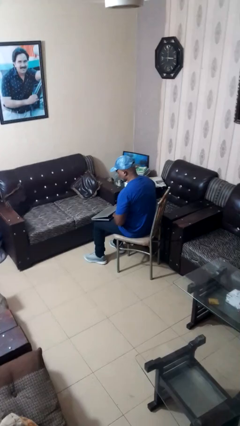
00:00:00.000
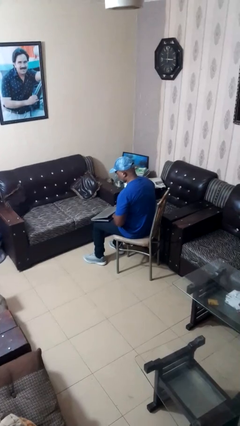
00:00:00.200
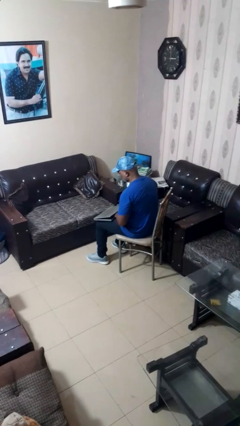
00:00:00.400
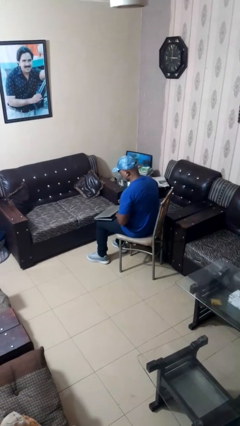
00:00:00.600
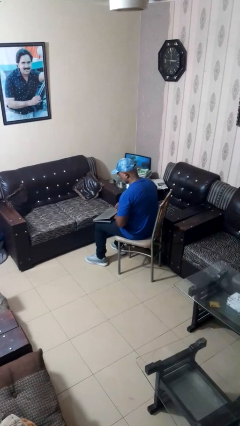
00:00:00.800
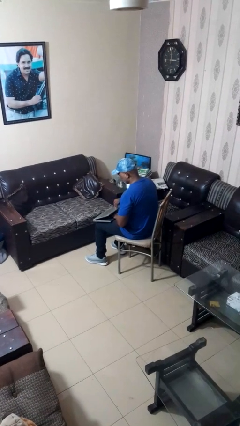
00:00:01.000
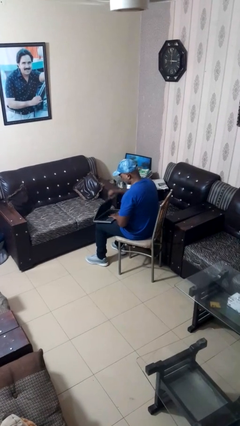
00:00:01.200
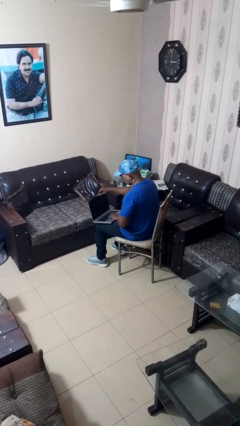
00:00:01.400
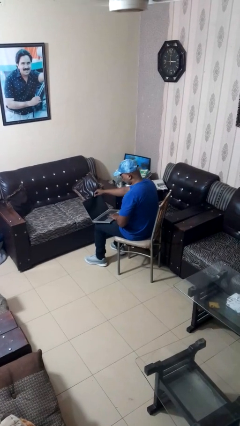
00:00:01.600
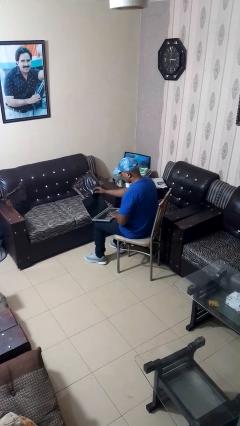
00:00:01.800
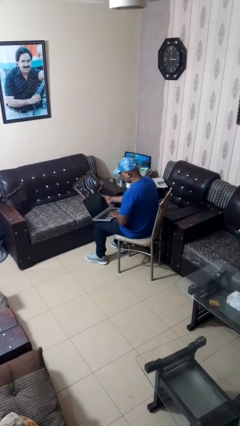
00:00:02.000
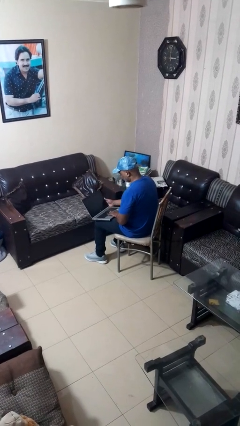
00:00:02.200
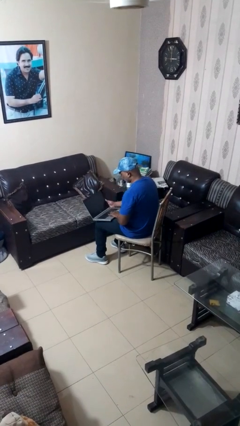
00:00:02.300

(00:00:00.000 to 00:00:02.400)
person opens laptop

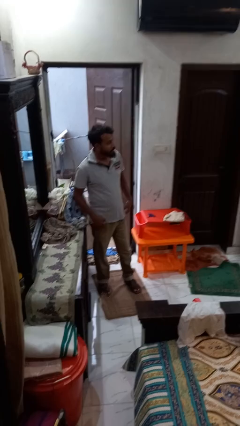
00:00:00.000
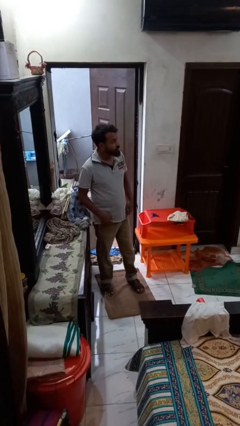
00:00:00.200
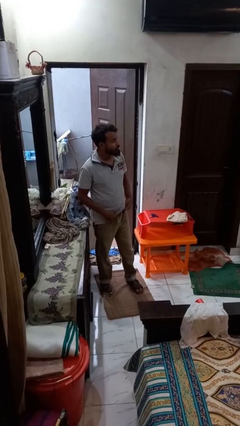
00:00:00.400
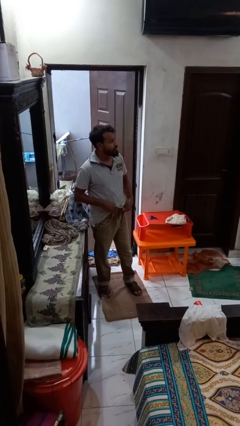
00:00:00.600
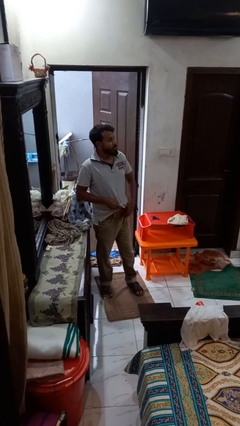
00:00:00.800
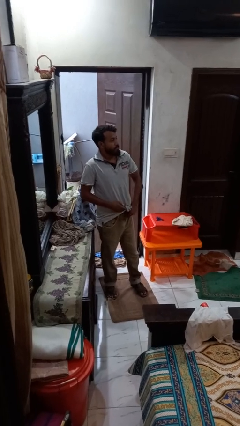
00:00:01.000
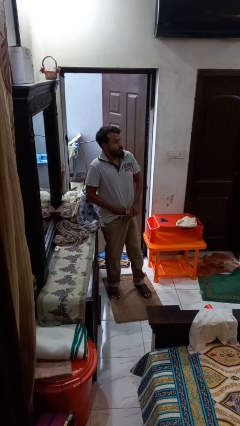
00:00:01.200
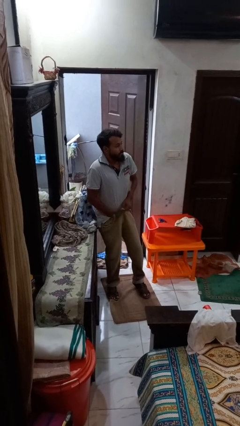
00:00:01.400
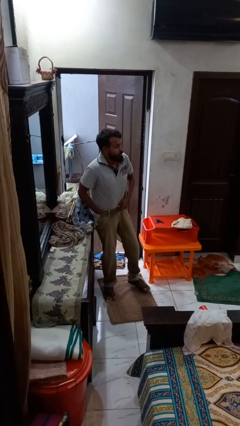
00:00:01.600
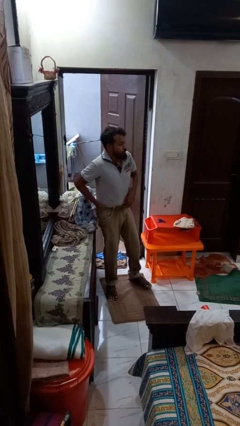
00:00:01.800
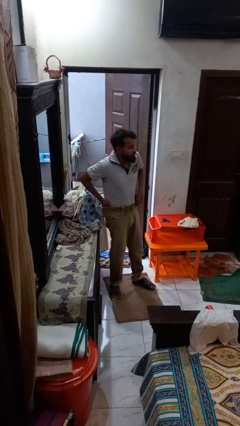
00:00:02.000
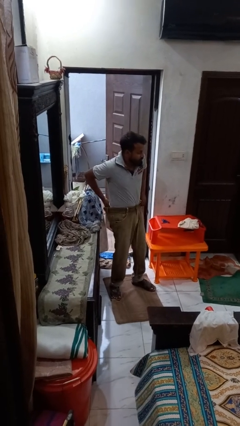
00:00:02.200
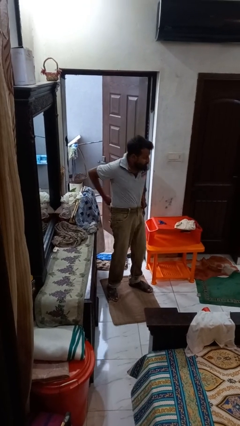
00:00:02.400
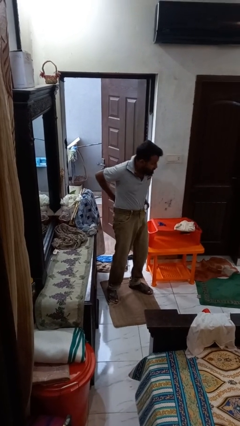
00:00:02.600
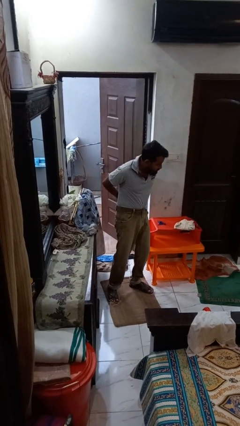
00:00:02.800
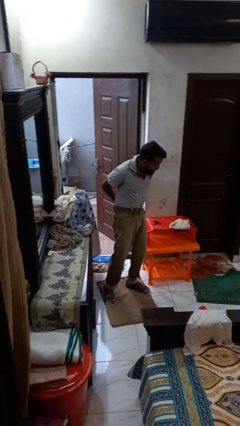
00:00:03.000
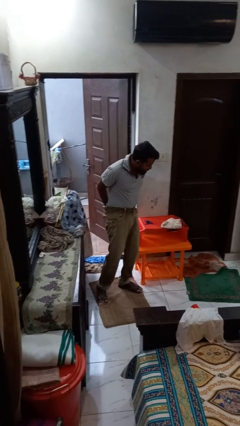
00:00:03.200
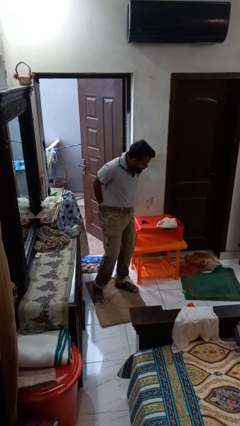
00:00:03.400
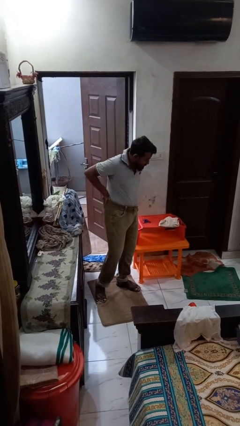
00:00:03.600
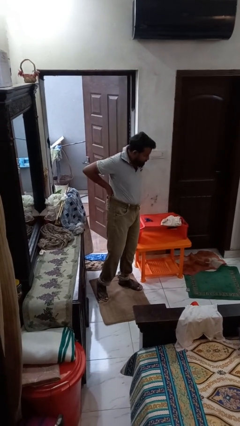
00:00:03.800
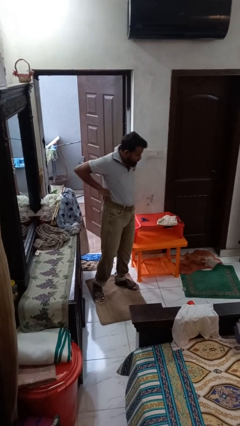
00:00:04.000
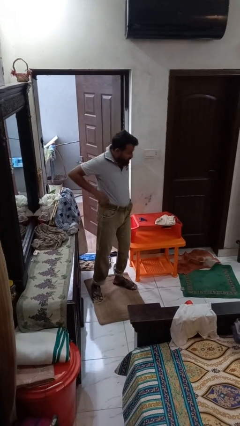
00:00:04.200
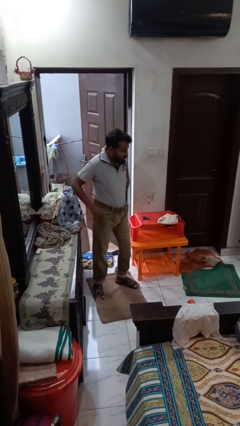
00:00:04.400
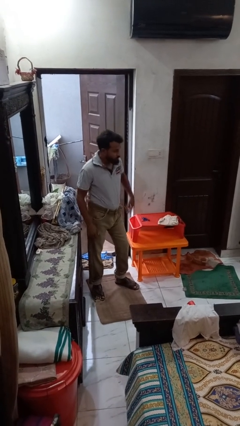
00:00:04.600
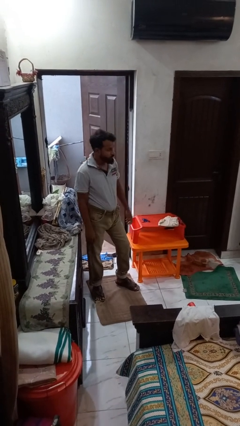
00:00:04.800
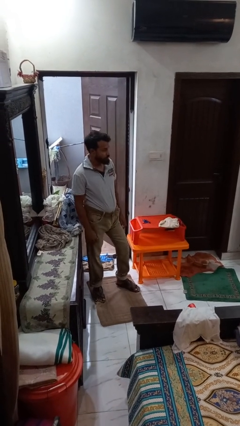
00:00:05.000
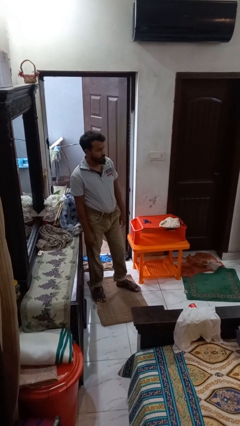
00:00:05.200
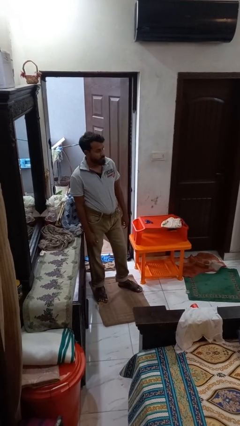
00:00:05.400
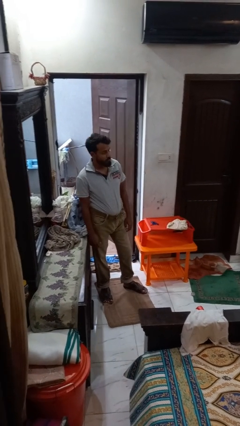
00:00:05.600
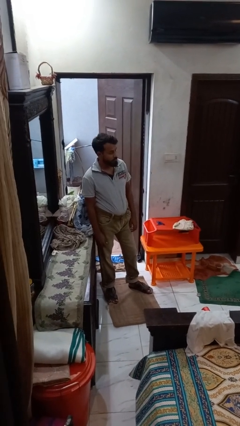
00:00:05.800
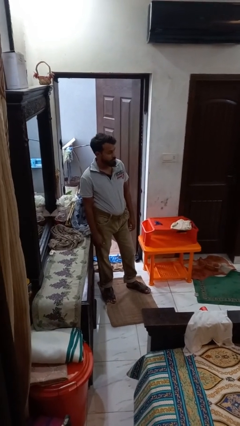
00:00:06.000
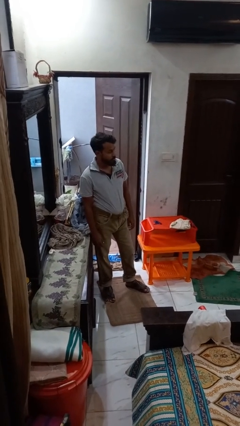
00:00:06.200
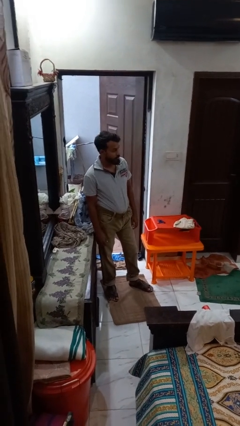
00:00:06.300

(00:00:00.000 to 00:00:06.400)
person tucks in shirt

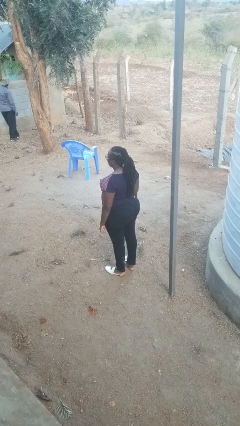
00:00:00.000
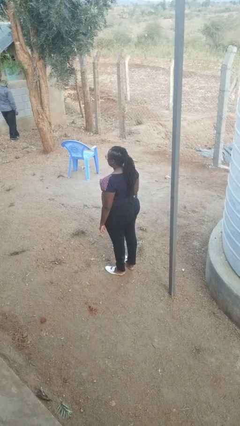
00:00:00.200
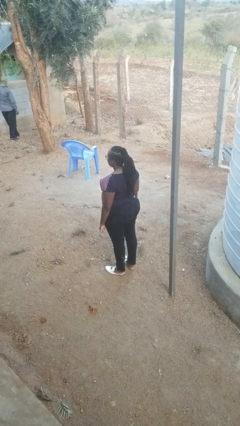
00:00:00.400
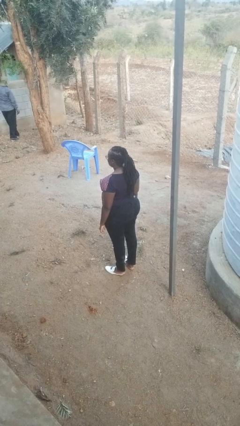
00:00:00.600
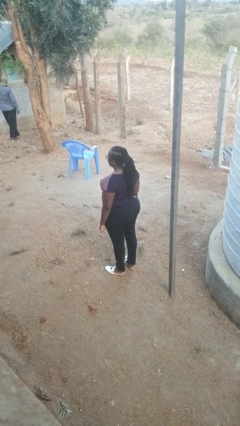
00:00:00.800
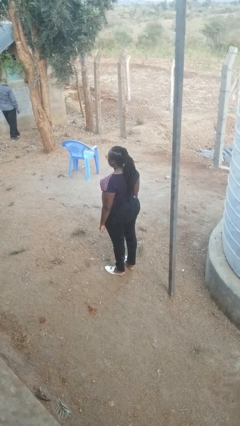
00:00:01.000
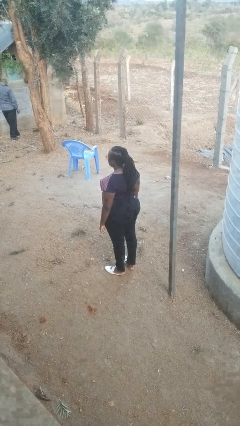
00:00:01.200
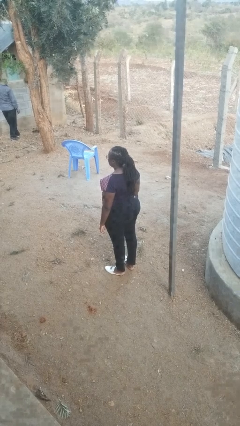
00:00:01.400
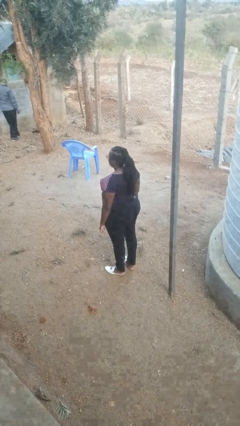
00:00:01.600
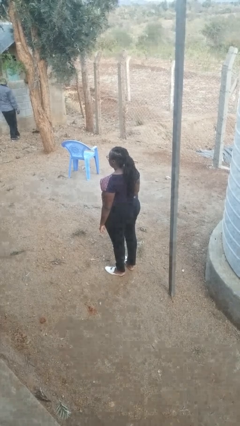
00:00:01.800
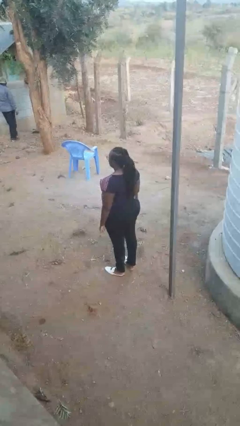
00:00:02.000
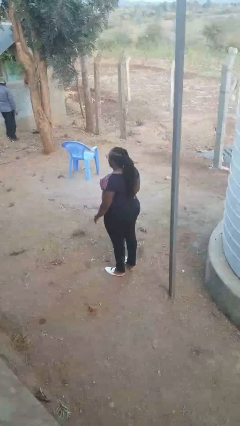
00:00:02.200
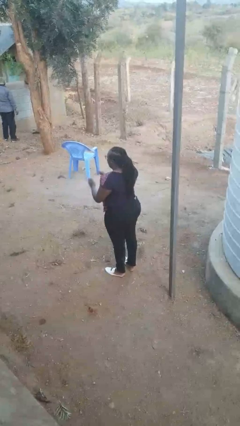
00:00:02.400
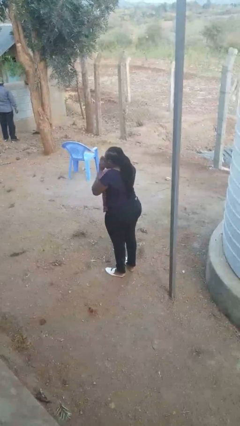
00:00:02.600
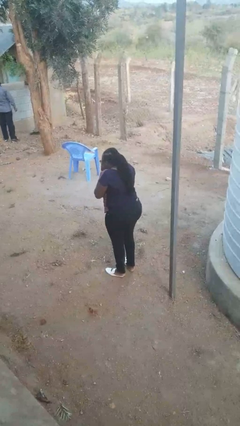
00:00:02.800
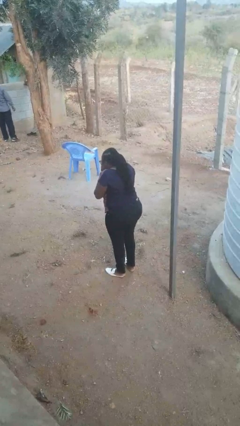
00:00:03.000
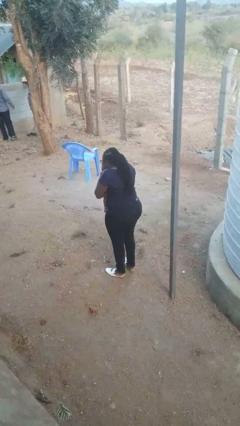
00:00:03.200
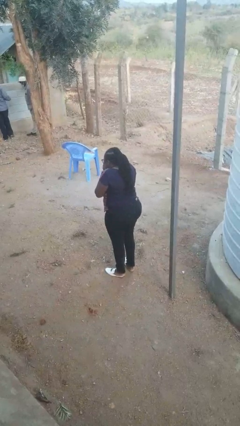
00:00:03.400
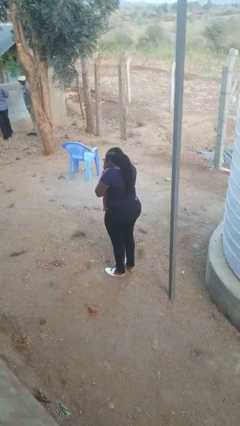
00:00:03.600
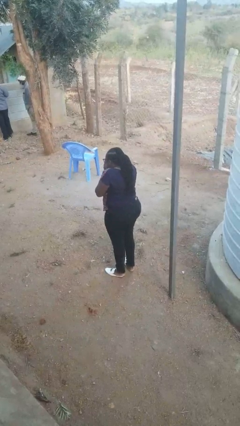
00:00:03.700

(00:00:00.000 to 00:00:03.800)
person sneezes into hand

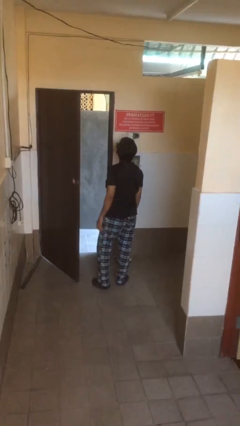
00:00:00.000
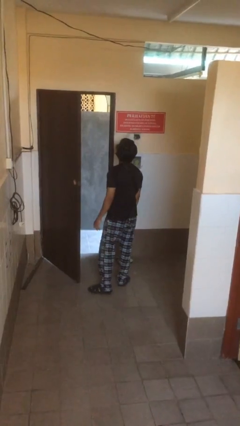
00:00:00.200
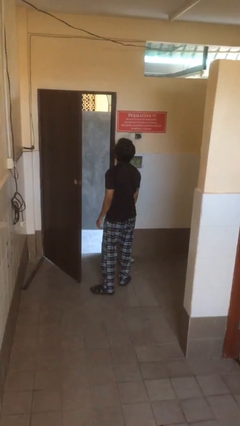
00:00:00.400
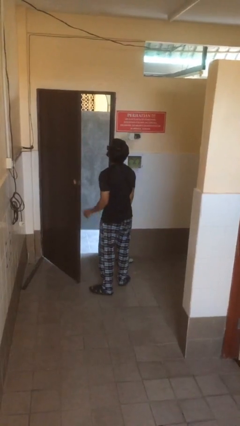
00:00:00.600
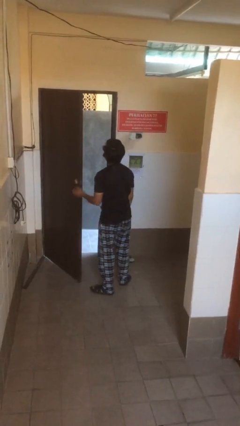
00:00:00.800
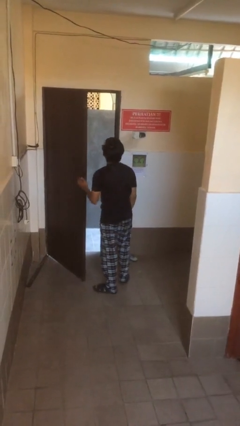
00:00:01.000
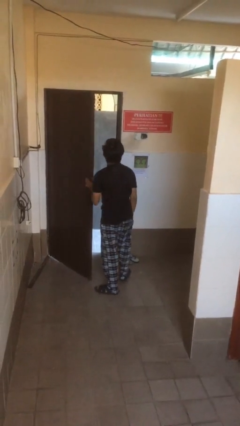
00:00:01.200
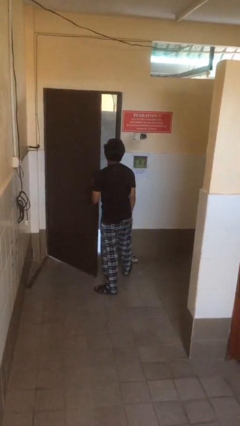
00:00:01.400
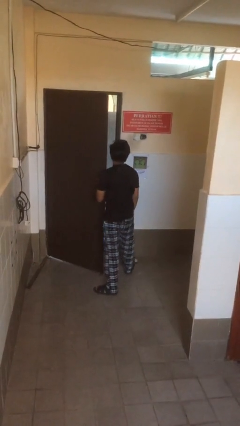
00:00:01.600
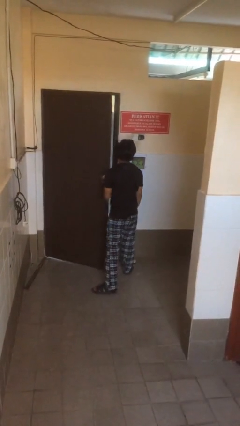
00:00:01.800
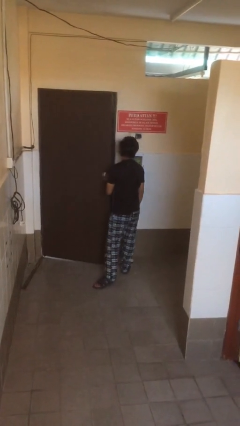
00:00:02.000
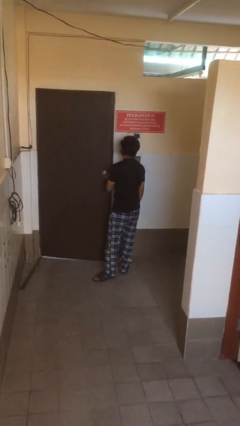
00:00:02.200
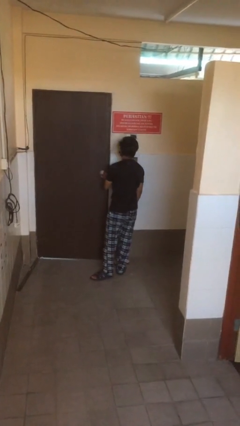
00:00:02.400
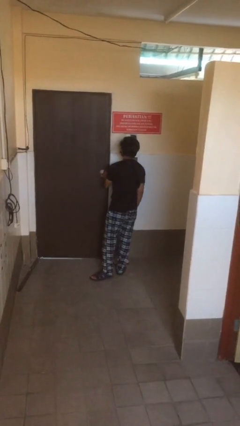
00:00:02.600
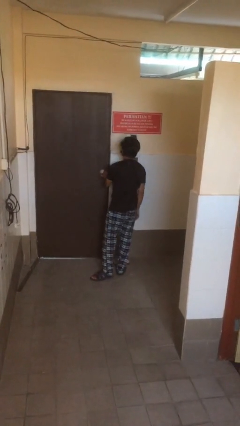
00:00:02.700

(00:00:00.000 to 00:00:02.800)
person closes facility door

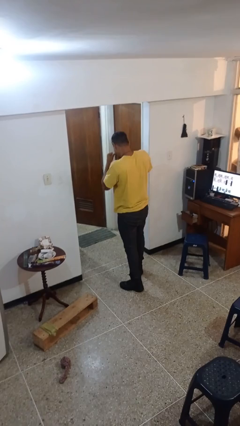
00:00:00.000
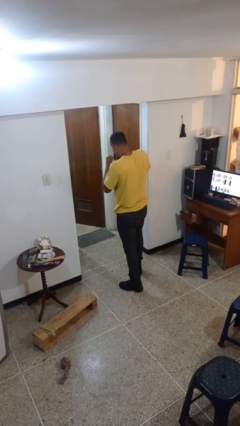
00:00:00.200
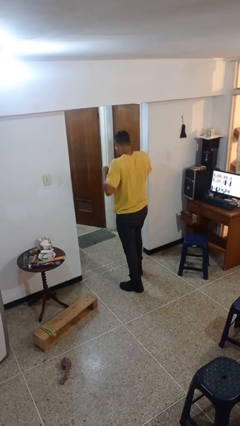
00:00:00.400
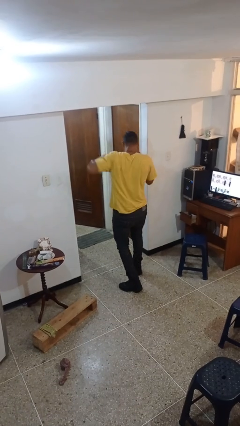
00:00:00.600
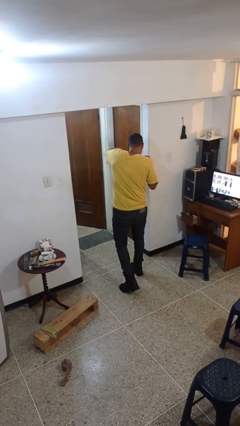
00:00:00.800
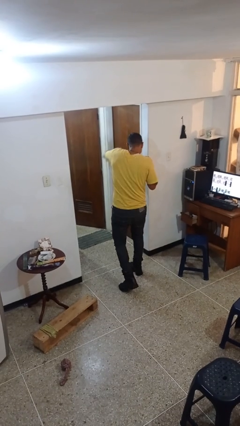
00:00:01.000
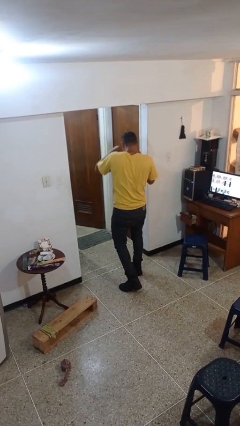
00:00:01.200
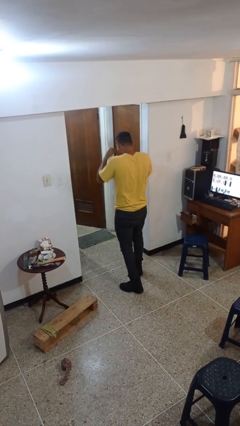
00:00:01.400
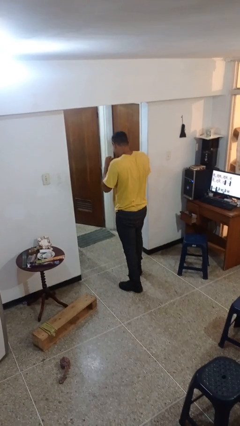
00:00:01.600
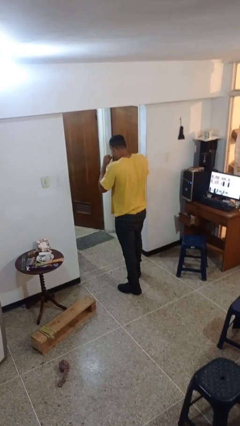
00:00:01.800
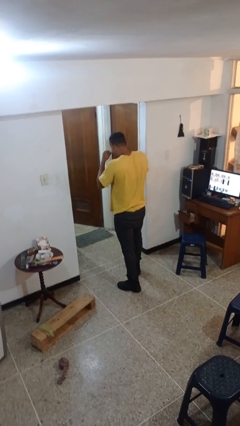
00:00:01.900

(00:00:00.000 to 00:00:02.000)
person punches
